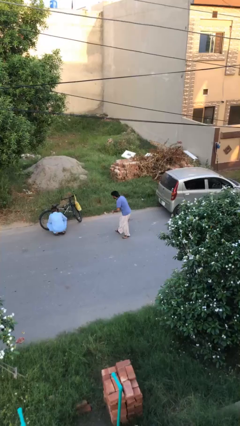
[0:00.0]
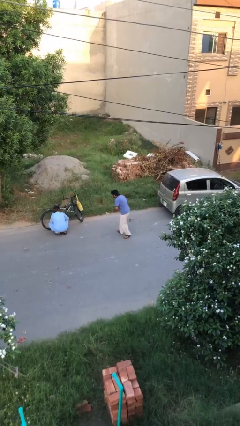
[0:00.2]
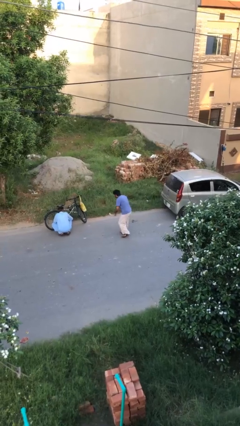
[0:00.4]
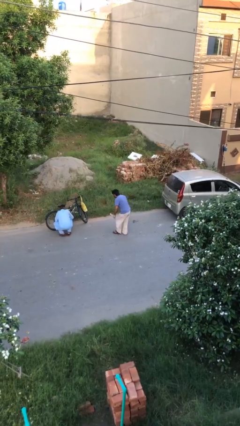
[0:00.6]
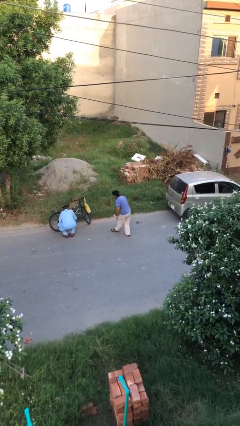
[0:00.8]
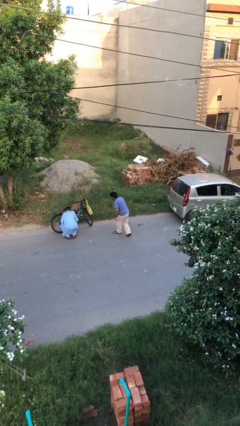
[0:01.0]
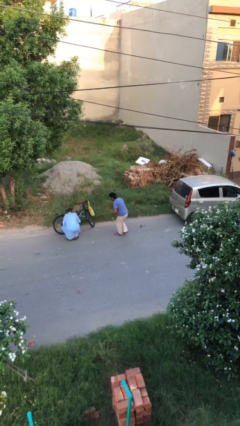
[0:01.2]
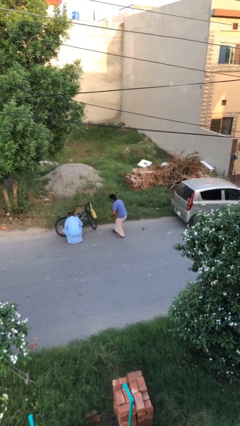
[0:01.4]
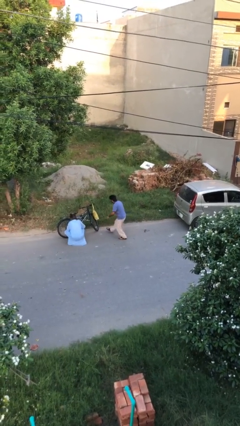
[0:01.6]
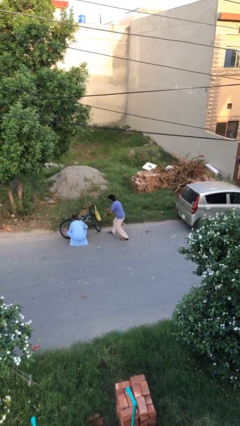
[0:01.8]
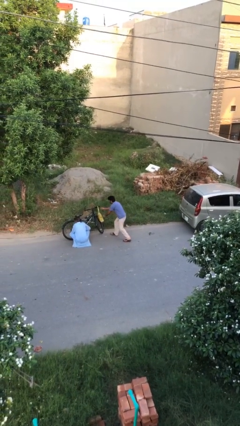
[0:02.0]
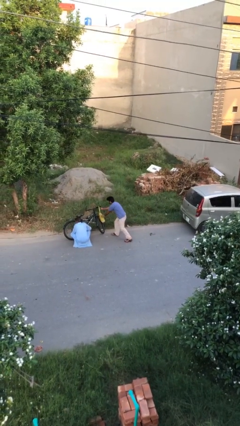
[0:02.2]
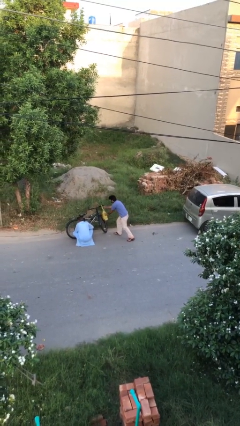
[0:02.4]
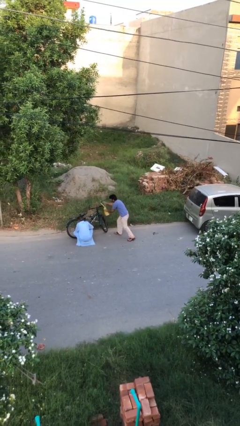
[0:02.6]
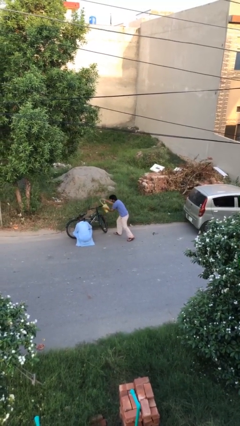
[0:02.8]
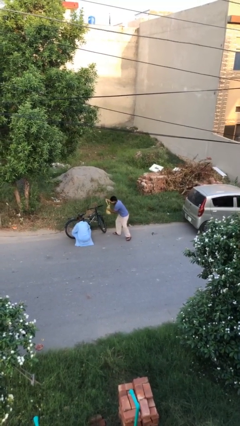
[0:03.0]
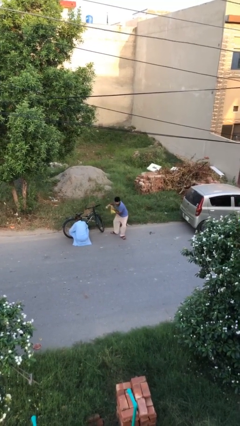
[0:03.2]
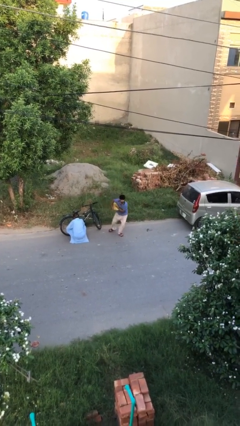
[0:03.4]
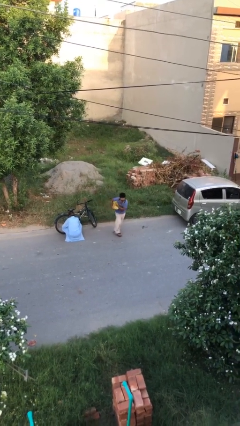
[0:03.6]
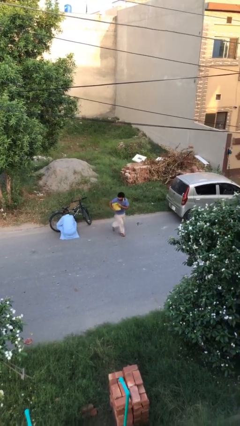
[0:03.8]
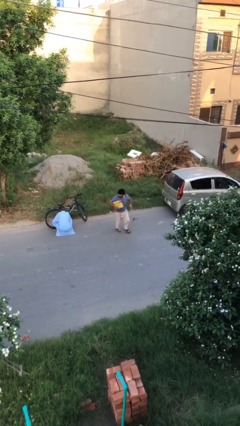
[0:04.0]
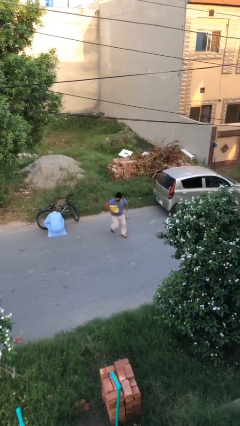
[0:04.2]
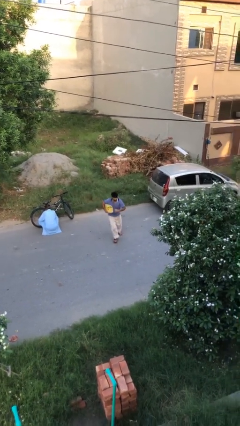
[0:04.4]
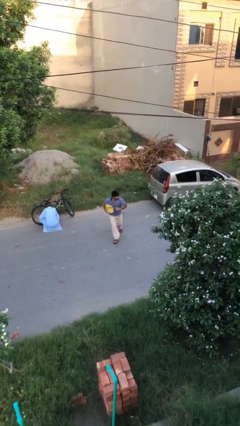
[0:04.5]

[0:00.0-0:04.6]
person steals object from person

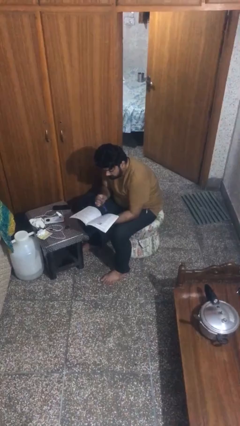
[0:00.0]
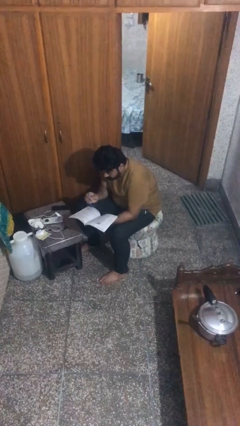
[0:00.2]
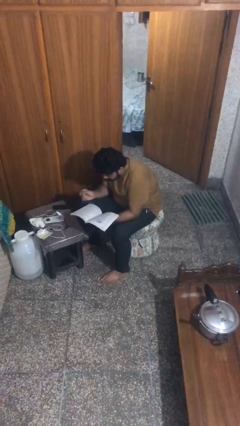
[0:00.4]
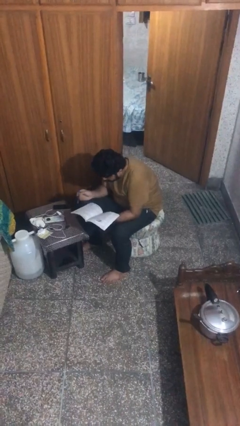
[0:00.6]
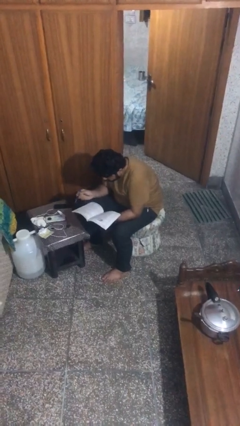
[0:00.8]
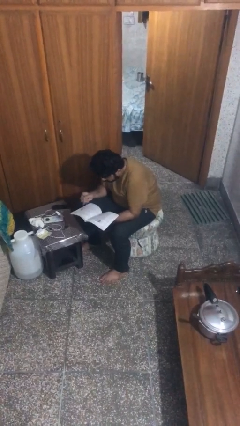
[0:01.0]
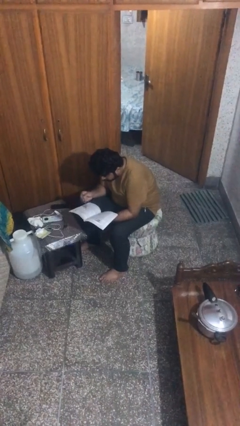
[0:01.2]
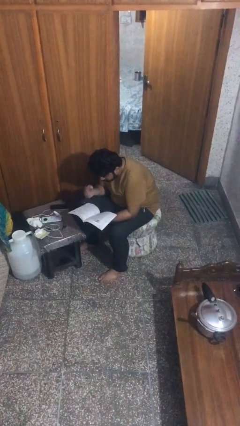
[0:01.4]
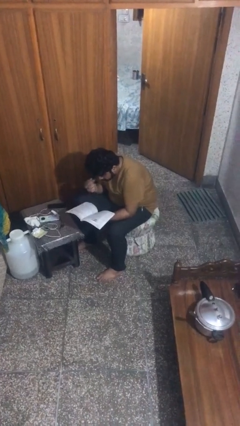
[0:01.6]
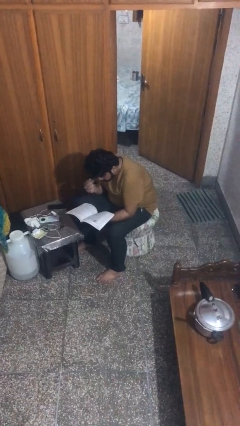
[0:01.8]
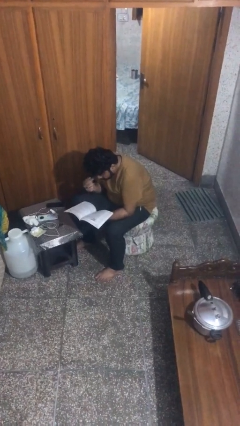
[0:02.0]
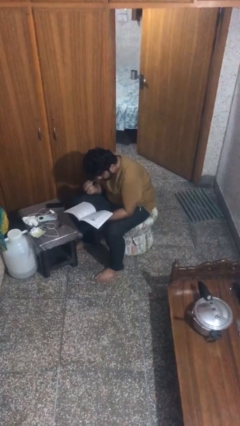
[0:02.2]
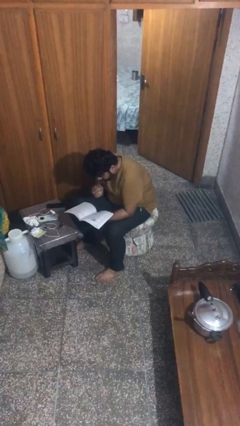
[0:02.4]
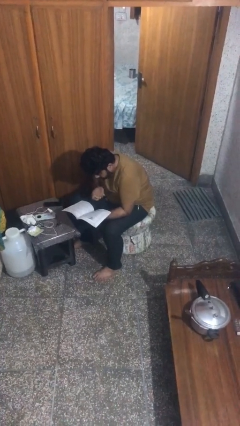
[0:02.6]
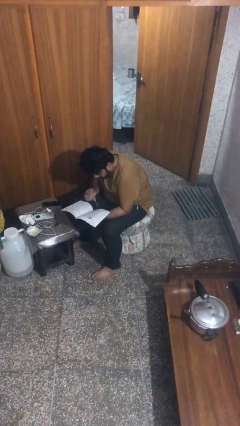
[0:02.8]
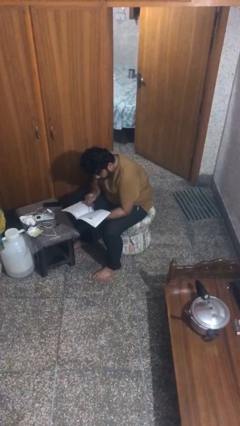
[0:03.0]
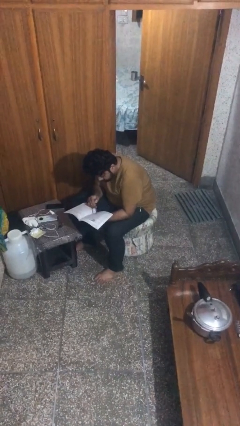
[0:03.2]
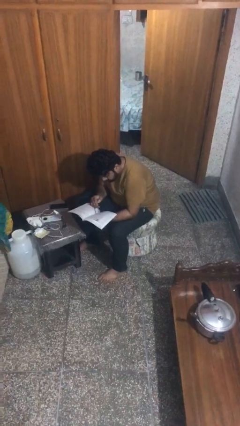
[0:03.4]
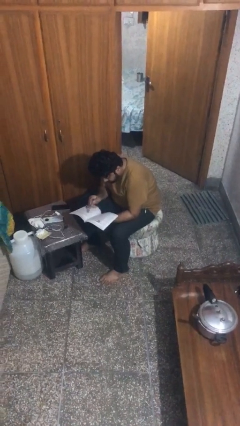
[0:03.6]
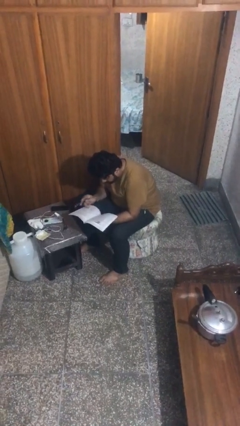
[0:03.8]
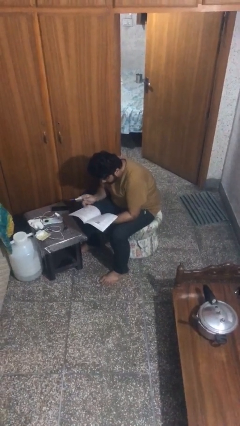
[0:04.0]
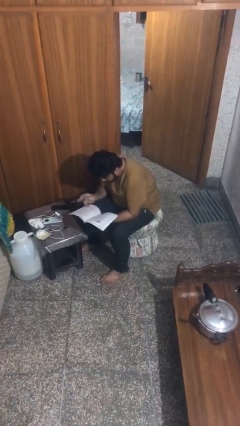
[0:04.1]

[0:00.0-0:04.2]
person reads document

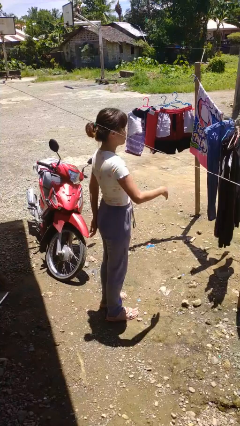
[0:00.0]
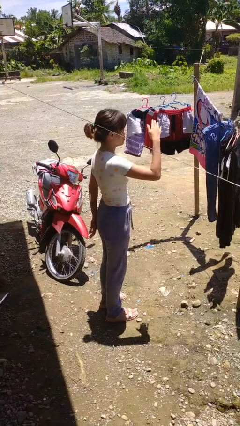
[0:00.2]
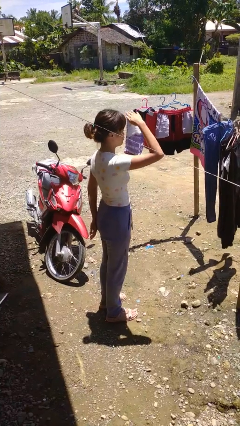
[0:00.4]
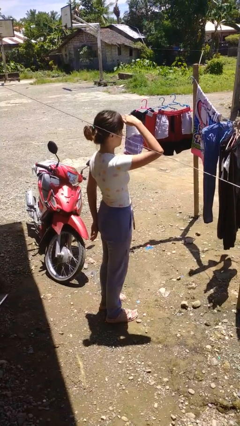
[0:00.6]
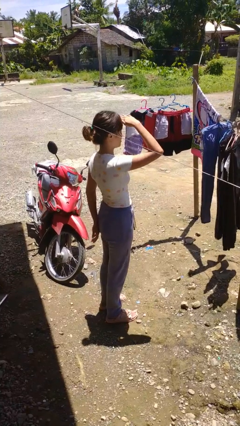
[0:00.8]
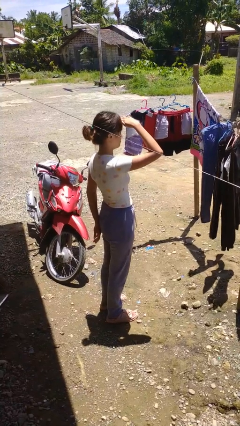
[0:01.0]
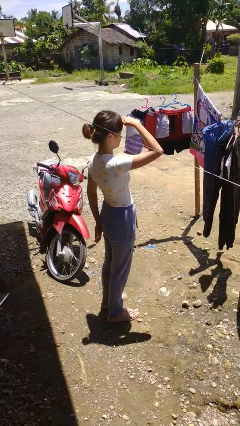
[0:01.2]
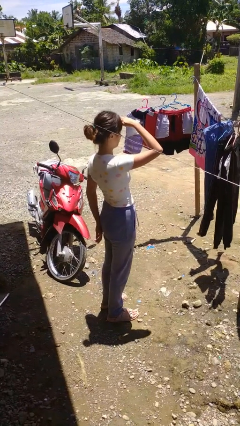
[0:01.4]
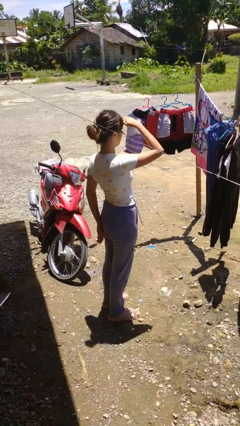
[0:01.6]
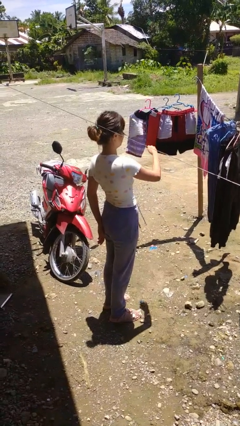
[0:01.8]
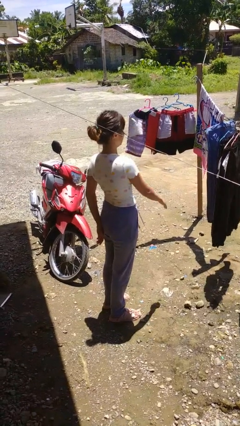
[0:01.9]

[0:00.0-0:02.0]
person shades eyes

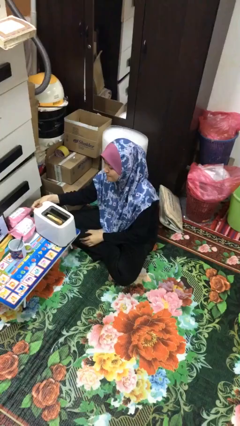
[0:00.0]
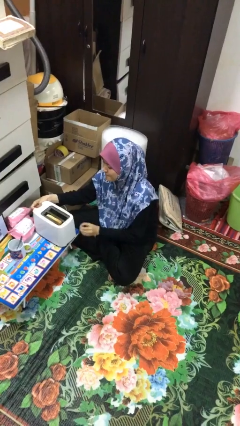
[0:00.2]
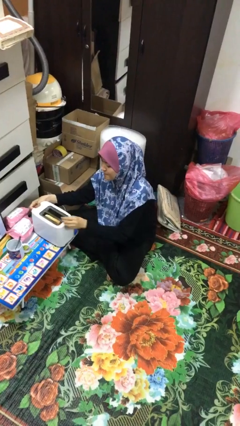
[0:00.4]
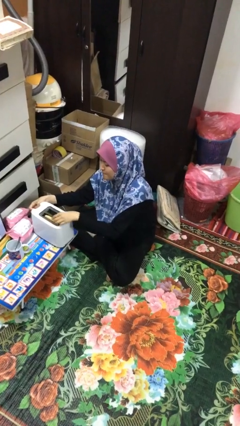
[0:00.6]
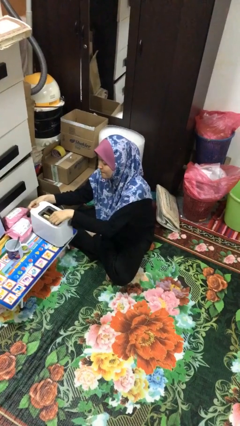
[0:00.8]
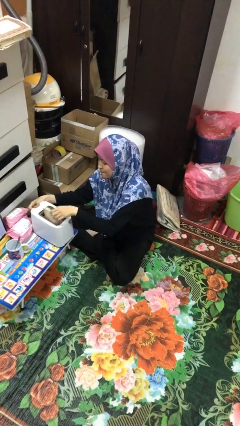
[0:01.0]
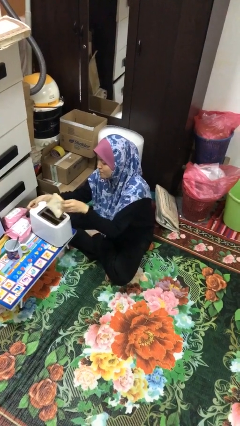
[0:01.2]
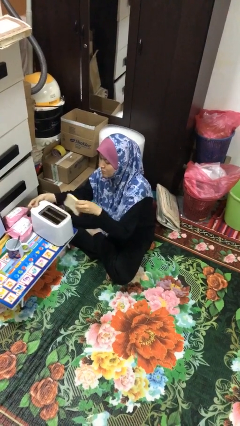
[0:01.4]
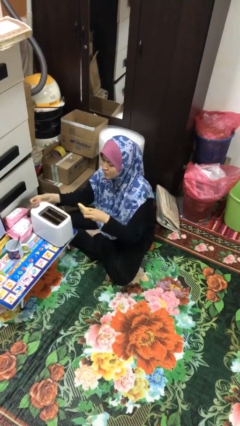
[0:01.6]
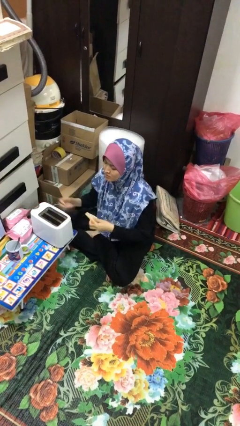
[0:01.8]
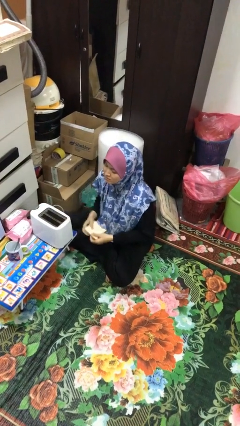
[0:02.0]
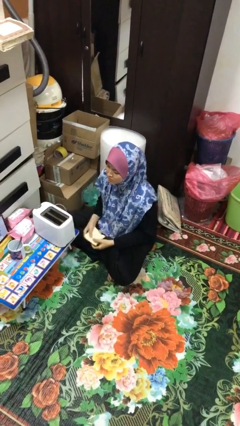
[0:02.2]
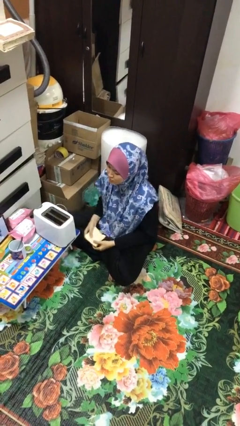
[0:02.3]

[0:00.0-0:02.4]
person takes object from toaster

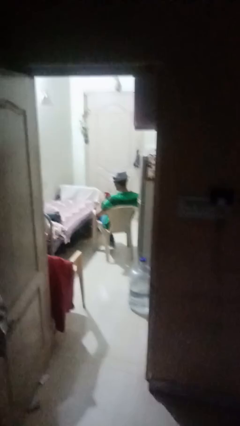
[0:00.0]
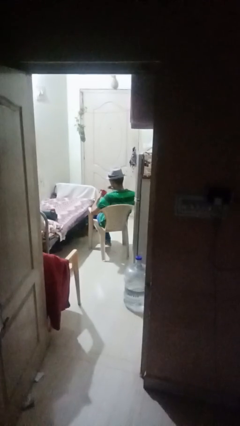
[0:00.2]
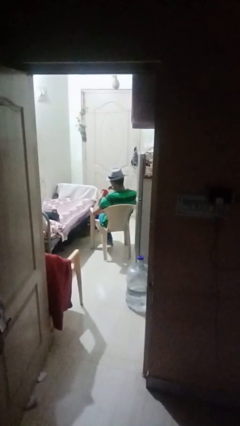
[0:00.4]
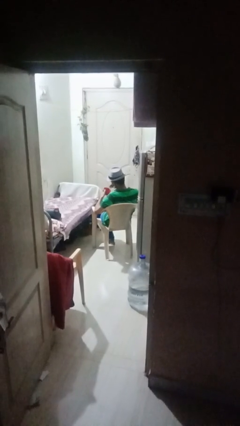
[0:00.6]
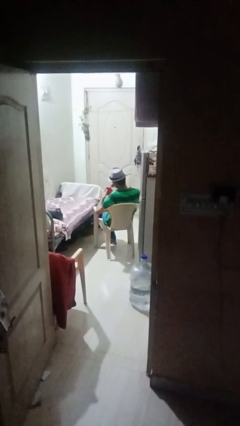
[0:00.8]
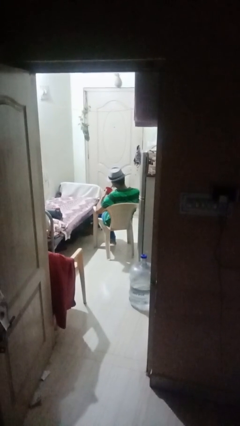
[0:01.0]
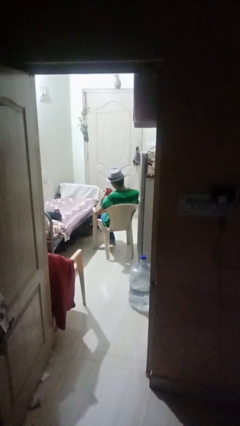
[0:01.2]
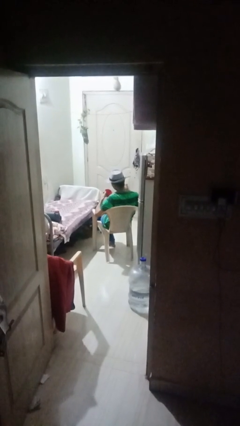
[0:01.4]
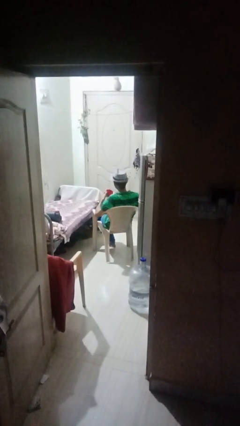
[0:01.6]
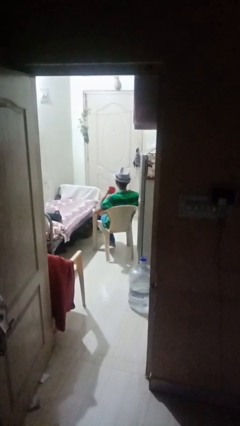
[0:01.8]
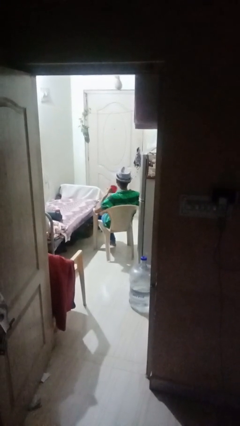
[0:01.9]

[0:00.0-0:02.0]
person stirs mug

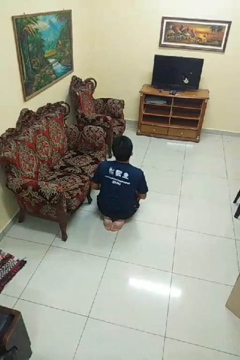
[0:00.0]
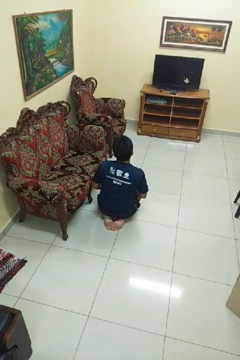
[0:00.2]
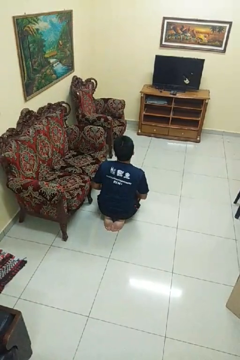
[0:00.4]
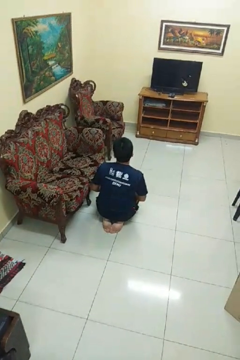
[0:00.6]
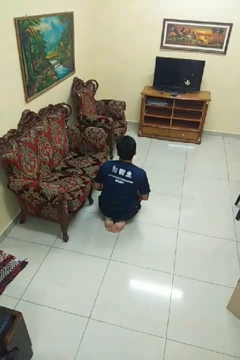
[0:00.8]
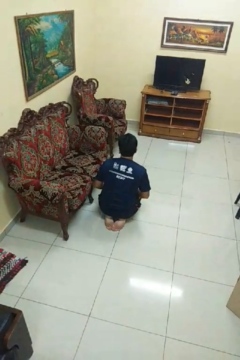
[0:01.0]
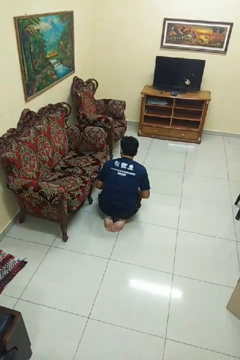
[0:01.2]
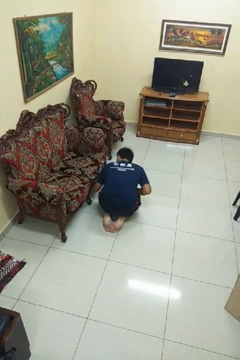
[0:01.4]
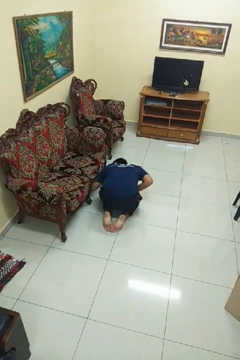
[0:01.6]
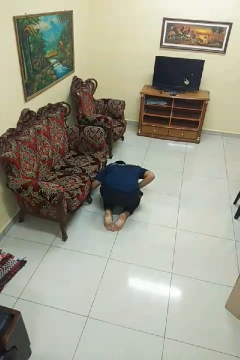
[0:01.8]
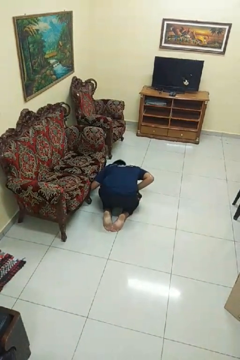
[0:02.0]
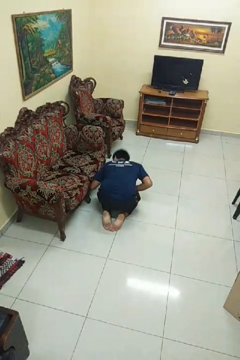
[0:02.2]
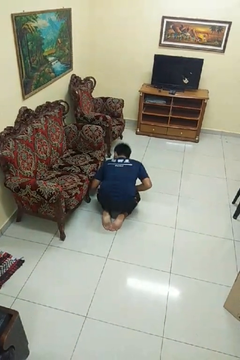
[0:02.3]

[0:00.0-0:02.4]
person searches under couch
